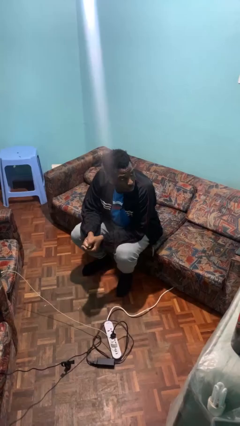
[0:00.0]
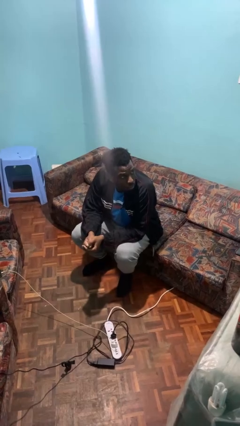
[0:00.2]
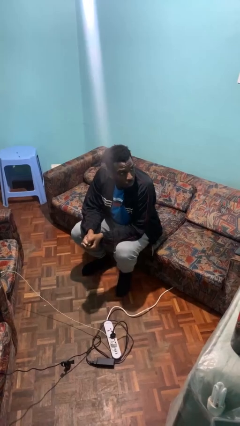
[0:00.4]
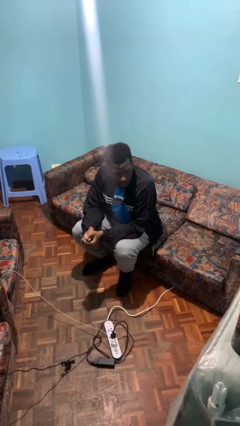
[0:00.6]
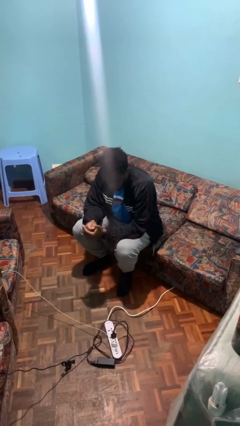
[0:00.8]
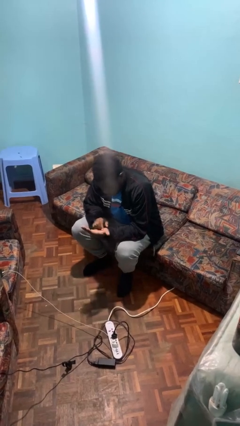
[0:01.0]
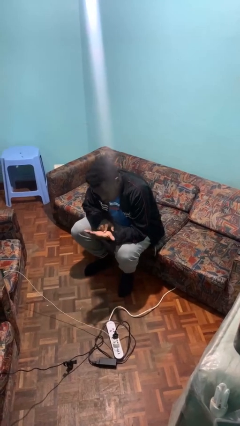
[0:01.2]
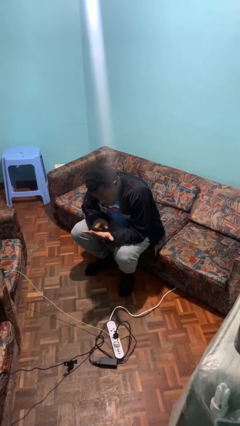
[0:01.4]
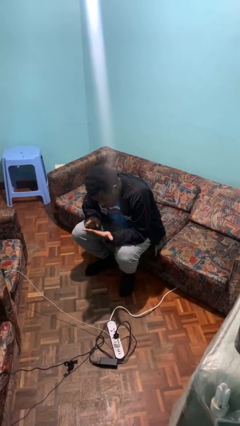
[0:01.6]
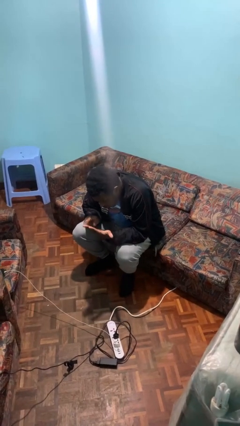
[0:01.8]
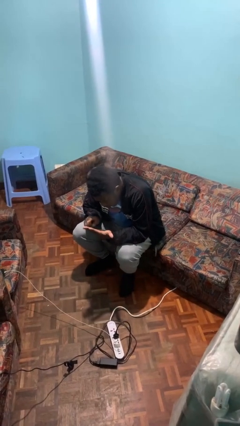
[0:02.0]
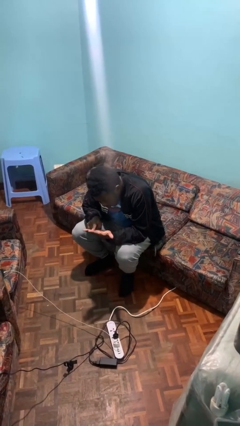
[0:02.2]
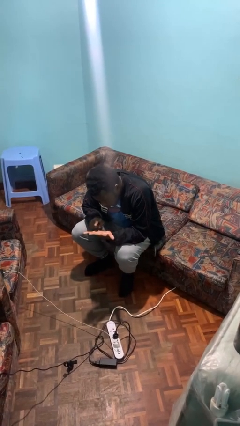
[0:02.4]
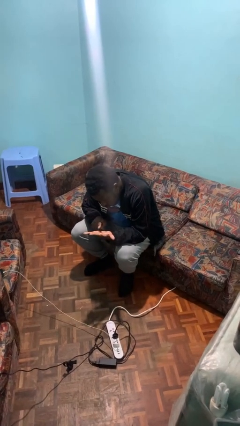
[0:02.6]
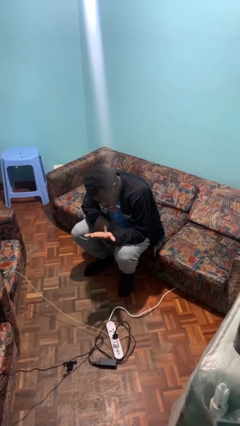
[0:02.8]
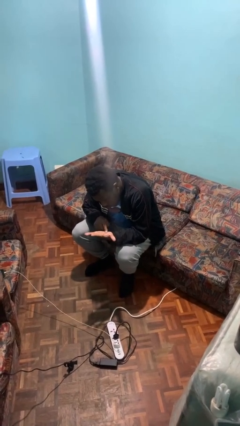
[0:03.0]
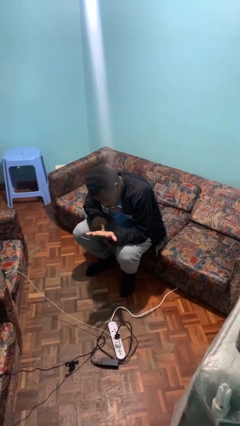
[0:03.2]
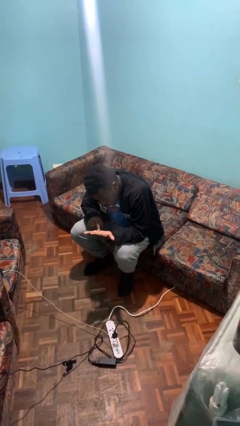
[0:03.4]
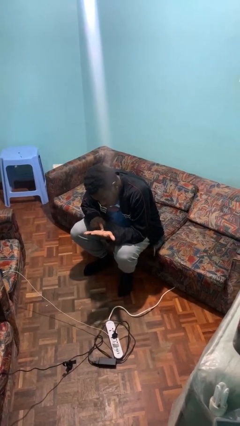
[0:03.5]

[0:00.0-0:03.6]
person looks at hands in lap

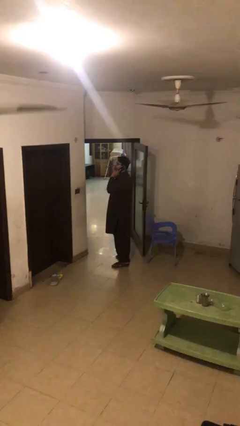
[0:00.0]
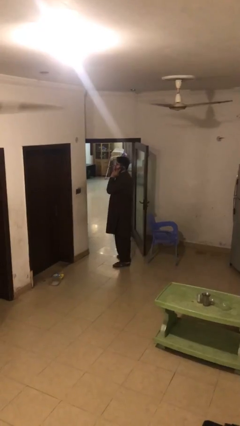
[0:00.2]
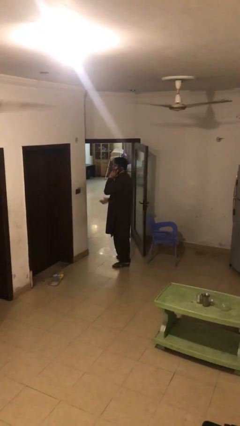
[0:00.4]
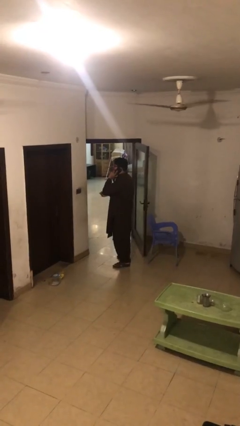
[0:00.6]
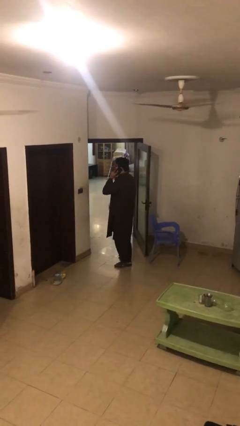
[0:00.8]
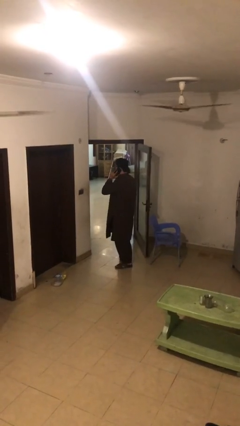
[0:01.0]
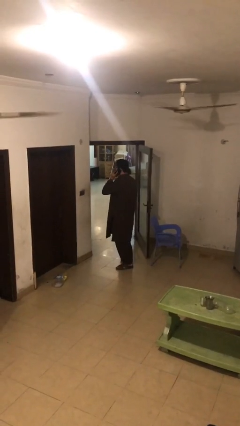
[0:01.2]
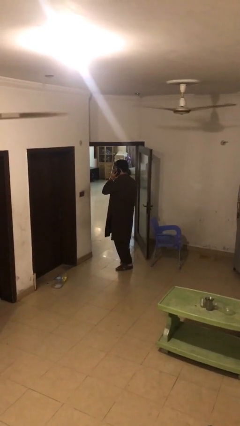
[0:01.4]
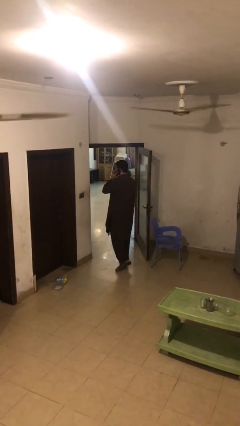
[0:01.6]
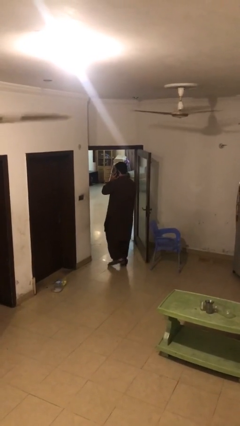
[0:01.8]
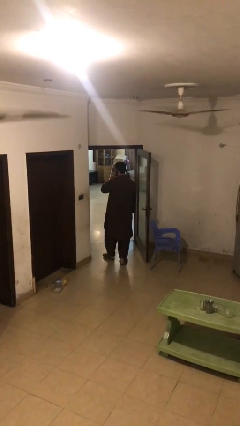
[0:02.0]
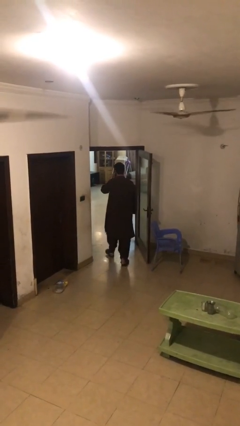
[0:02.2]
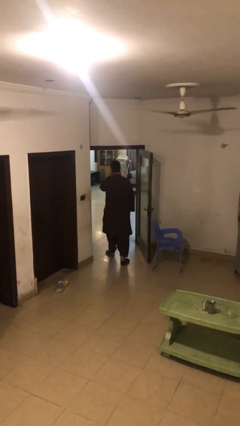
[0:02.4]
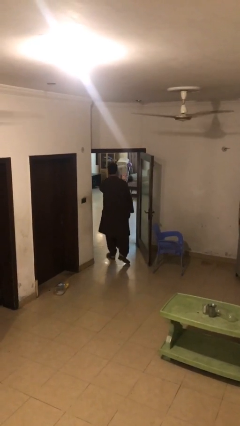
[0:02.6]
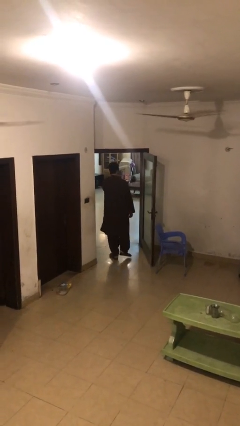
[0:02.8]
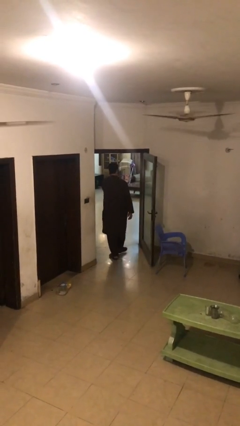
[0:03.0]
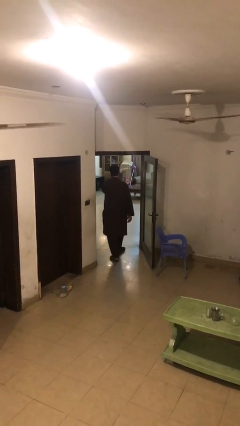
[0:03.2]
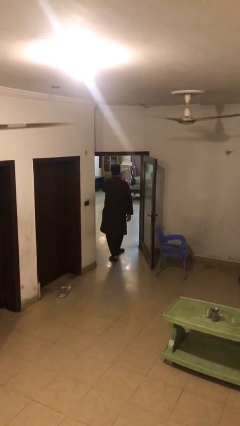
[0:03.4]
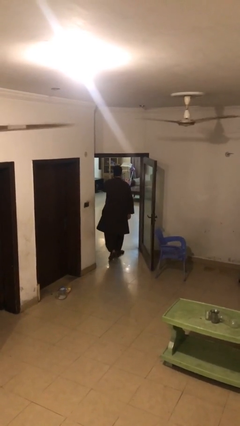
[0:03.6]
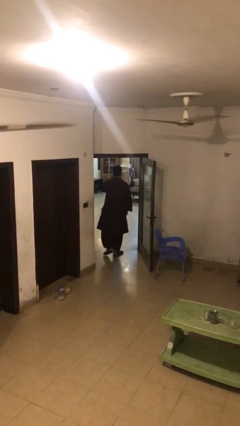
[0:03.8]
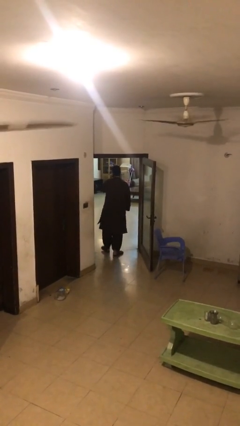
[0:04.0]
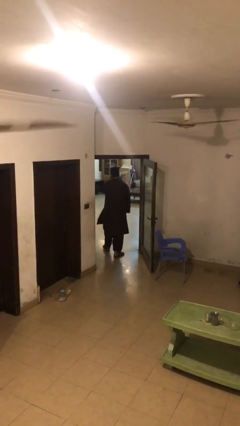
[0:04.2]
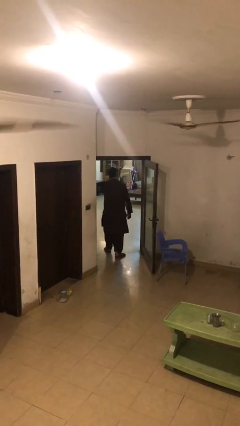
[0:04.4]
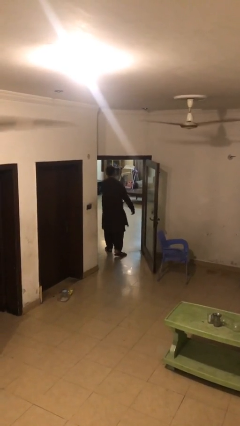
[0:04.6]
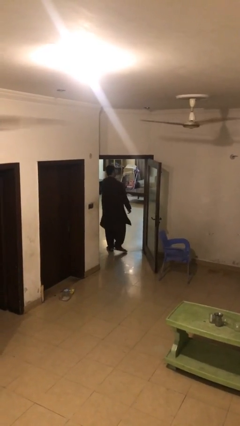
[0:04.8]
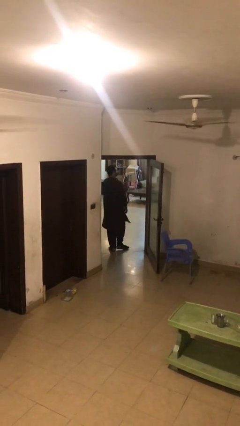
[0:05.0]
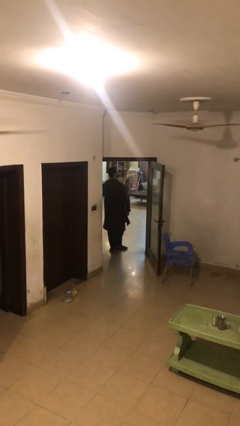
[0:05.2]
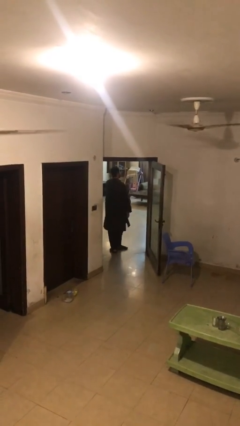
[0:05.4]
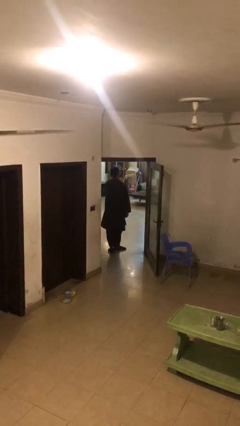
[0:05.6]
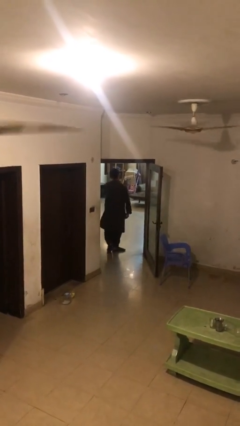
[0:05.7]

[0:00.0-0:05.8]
person exits scene through structure

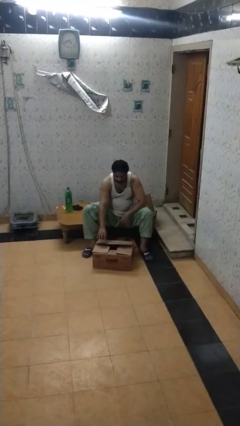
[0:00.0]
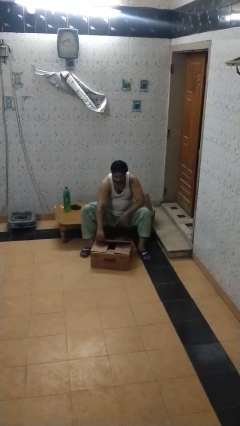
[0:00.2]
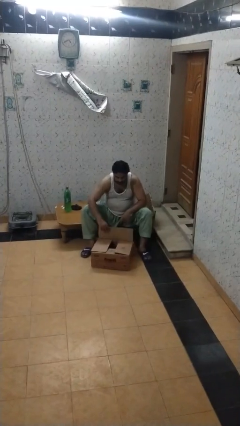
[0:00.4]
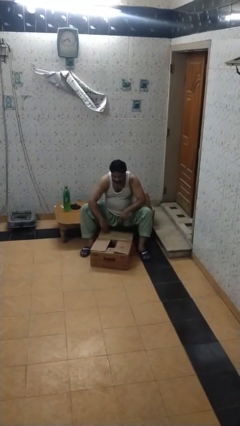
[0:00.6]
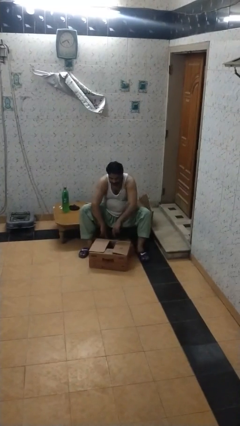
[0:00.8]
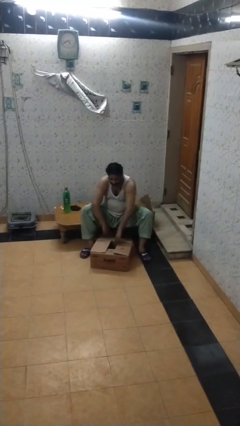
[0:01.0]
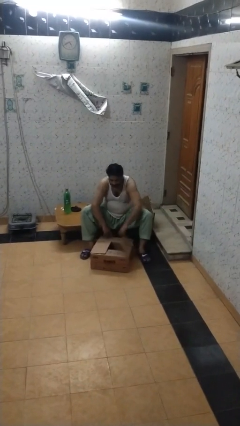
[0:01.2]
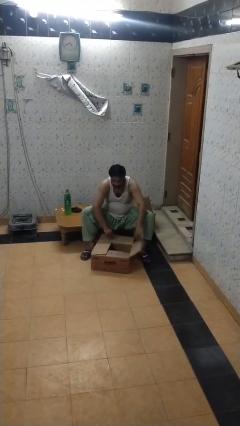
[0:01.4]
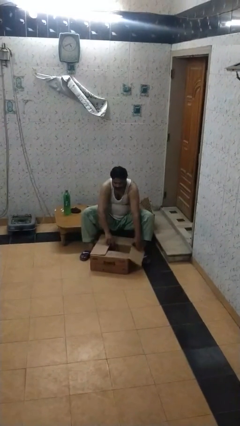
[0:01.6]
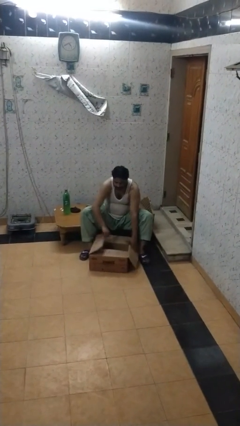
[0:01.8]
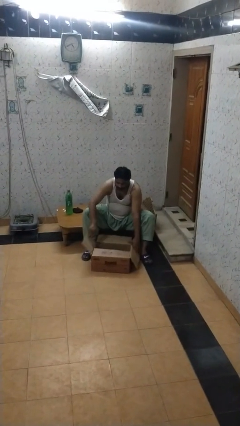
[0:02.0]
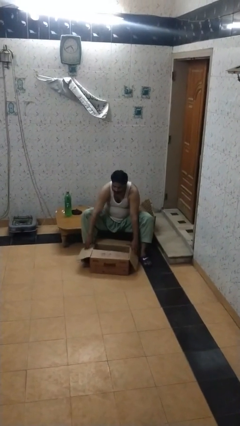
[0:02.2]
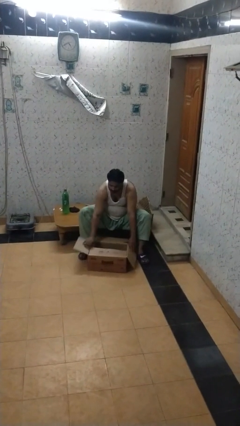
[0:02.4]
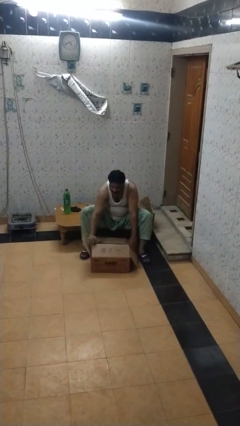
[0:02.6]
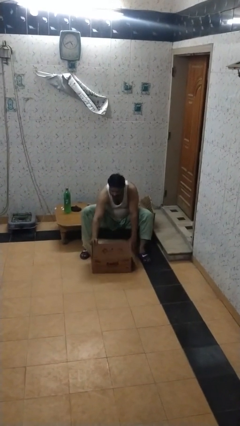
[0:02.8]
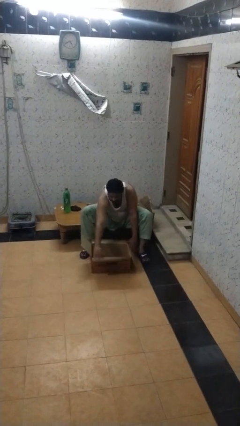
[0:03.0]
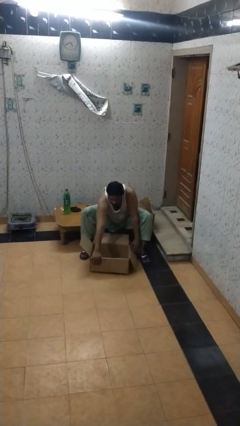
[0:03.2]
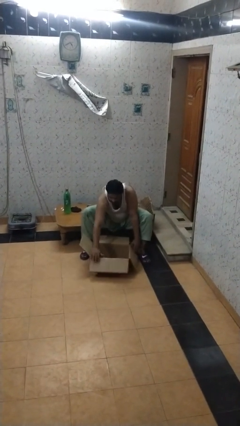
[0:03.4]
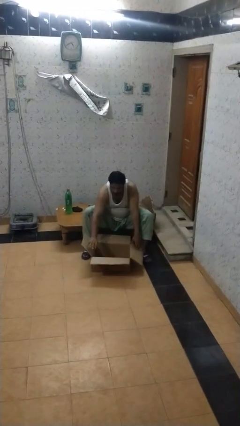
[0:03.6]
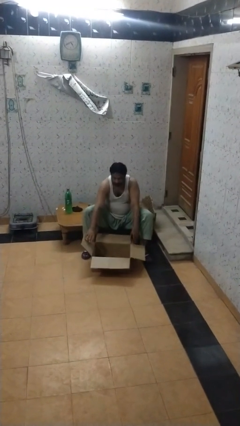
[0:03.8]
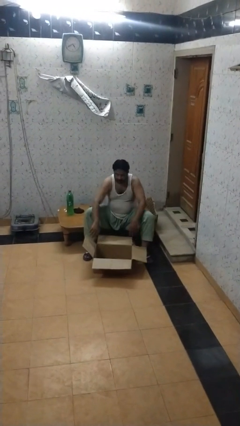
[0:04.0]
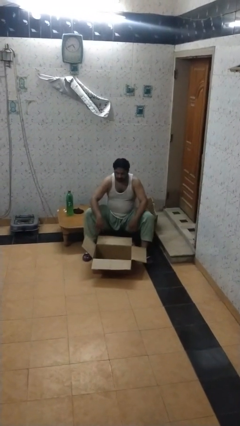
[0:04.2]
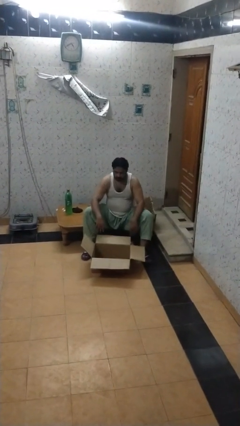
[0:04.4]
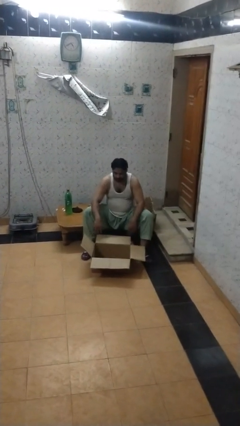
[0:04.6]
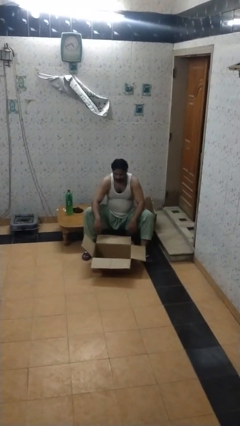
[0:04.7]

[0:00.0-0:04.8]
person opens box

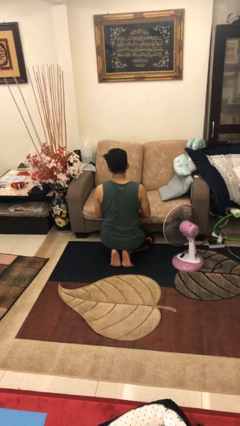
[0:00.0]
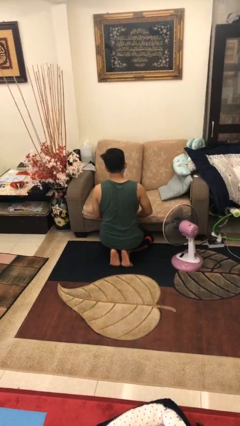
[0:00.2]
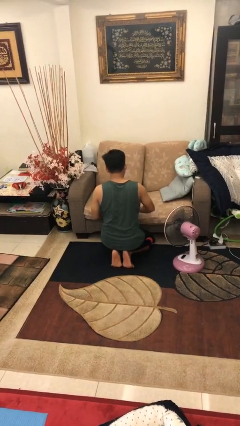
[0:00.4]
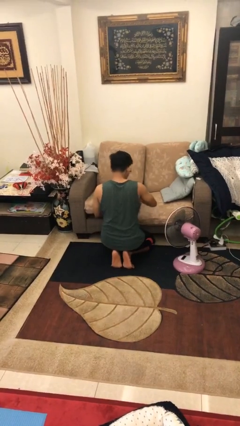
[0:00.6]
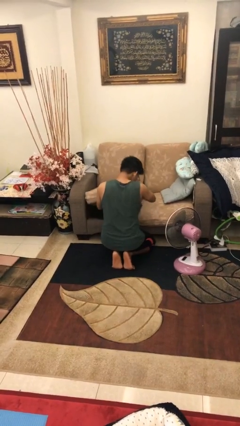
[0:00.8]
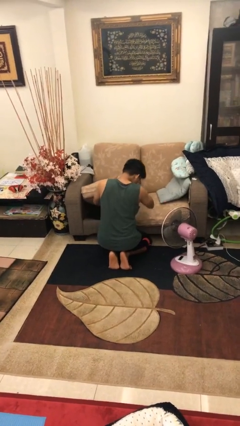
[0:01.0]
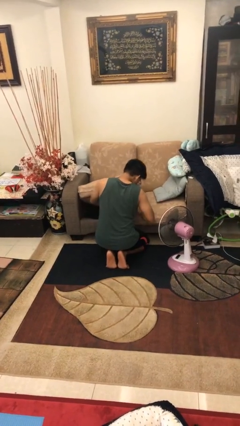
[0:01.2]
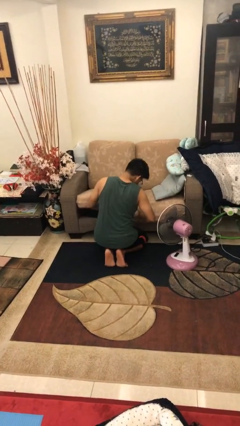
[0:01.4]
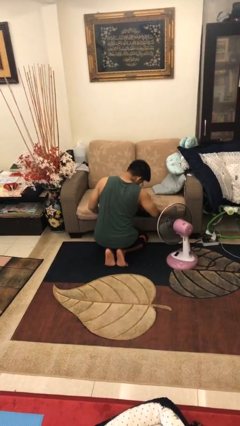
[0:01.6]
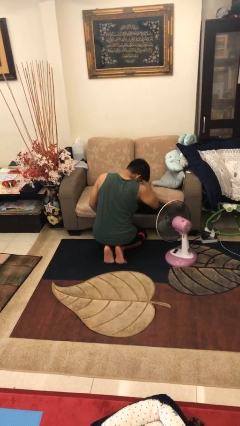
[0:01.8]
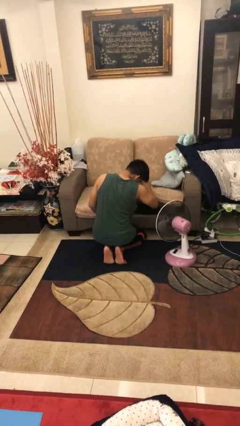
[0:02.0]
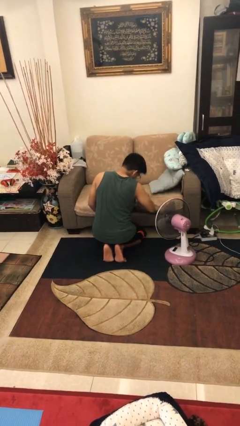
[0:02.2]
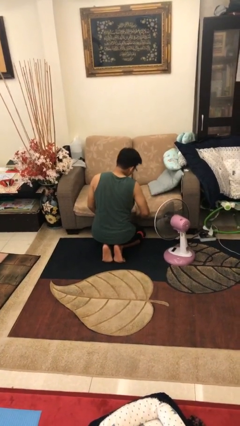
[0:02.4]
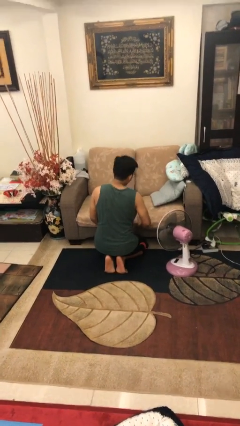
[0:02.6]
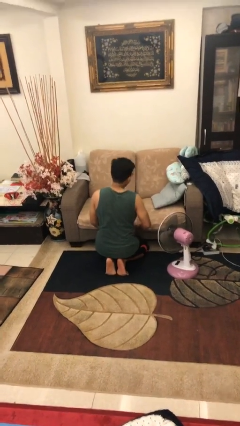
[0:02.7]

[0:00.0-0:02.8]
person searches in couch

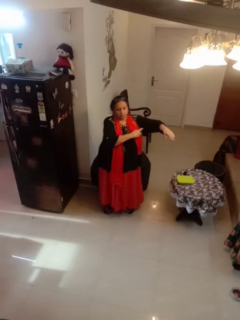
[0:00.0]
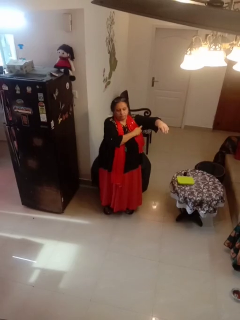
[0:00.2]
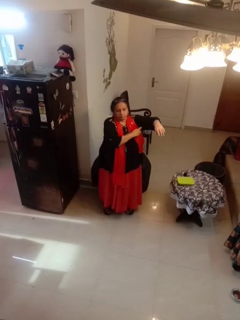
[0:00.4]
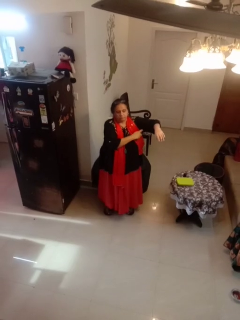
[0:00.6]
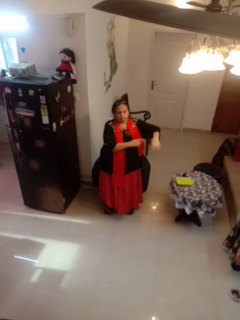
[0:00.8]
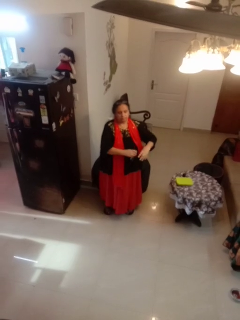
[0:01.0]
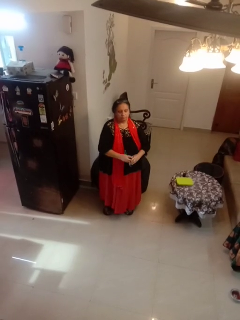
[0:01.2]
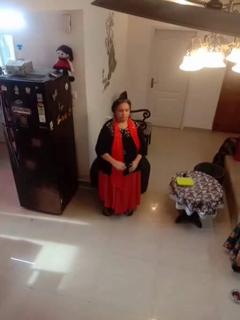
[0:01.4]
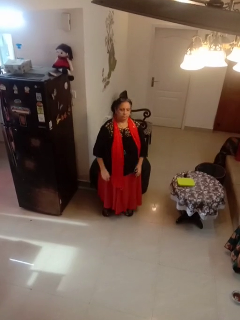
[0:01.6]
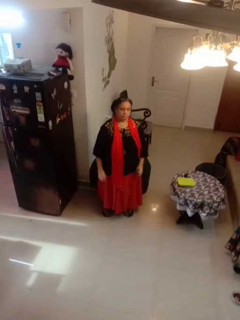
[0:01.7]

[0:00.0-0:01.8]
person applies deodorant
